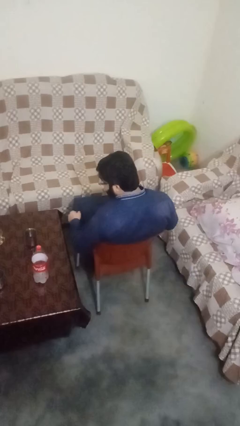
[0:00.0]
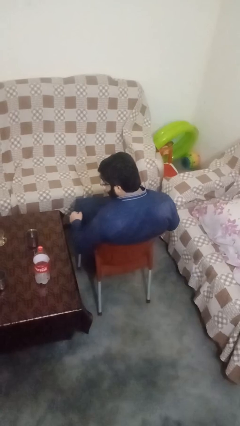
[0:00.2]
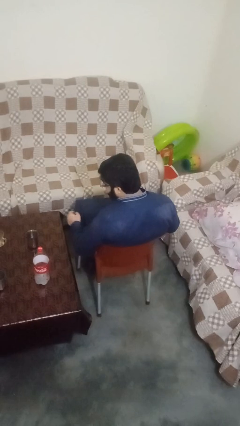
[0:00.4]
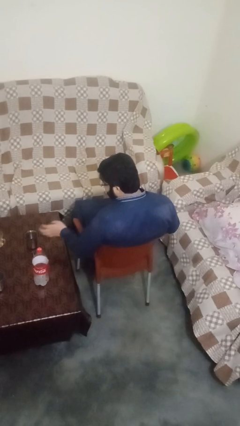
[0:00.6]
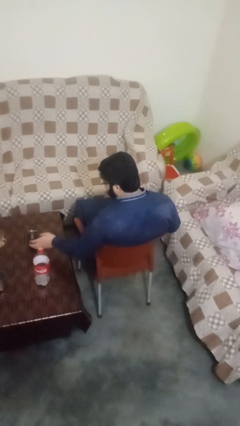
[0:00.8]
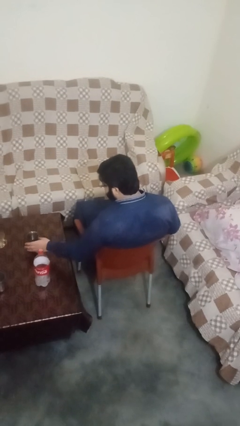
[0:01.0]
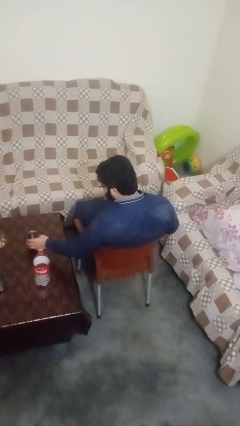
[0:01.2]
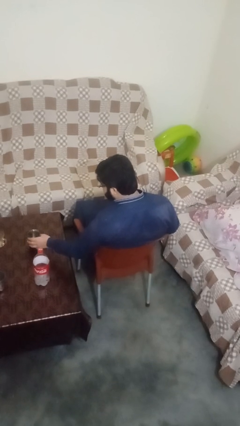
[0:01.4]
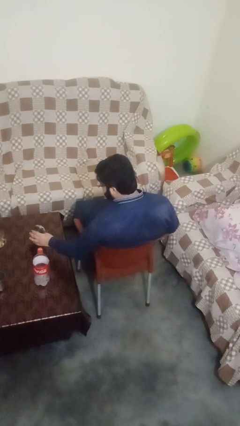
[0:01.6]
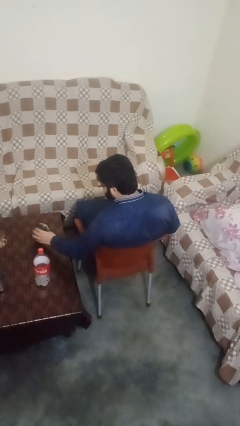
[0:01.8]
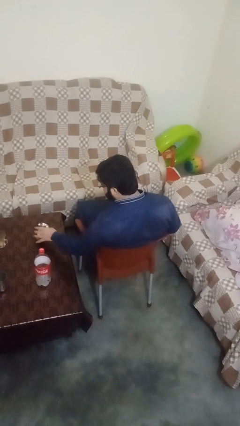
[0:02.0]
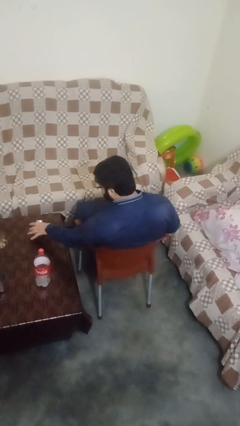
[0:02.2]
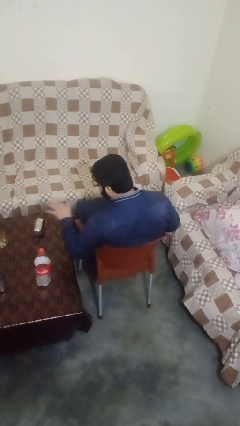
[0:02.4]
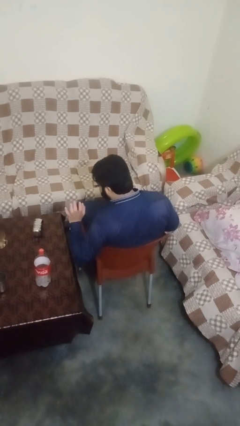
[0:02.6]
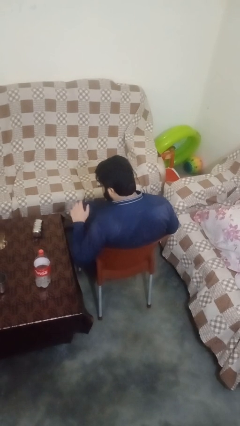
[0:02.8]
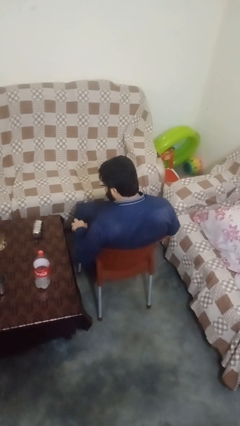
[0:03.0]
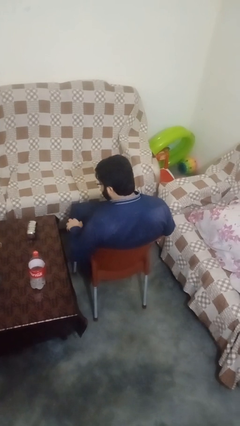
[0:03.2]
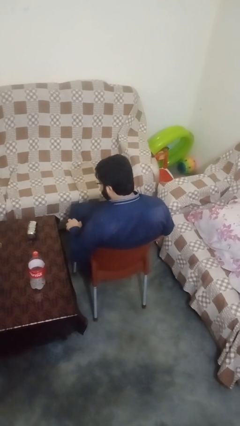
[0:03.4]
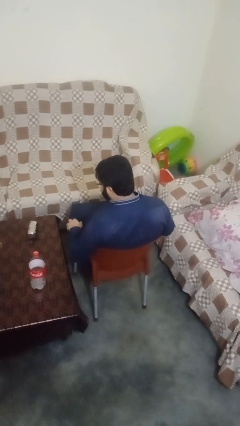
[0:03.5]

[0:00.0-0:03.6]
person knocks over glass

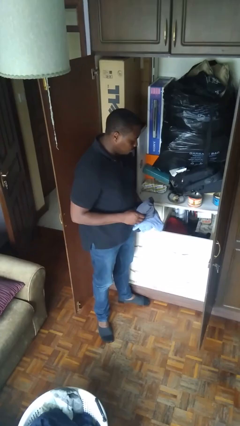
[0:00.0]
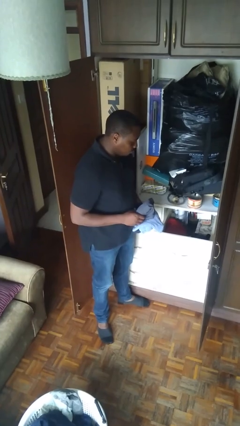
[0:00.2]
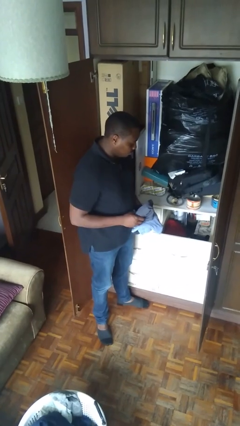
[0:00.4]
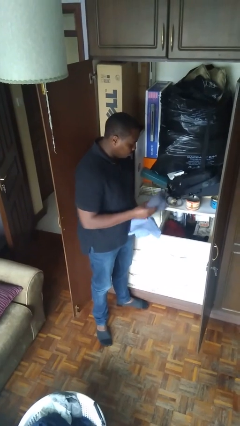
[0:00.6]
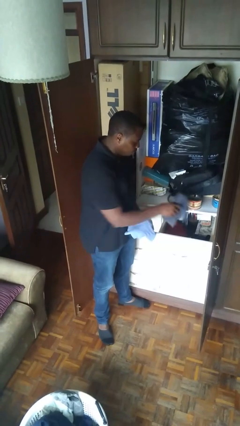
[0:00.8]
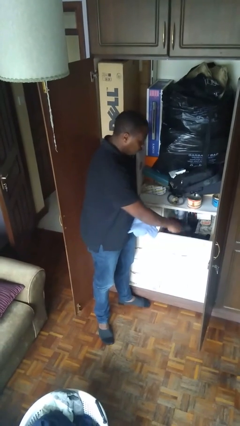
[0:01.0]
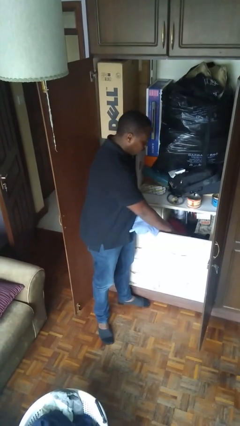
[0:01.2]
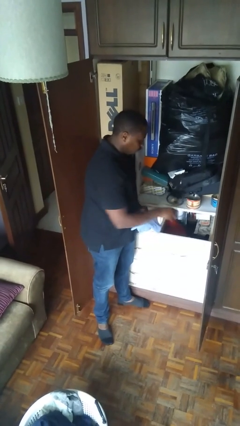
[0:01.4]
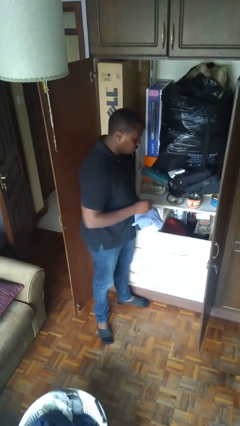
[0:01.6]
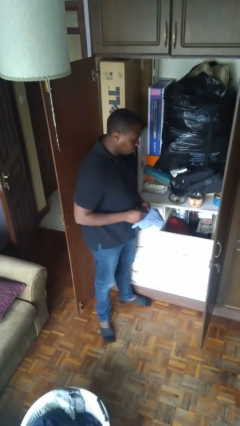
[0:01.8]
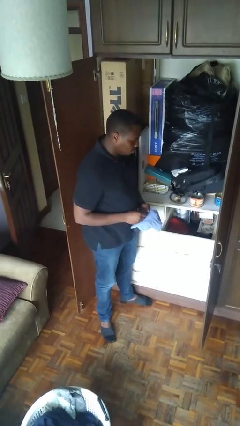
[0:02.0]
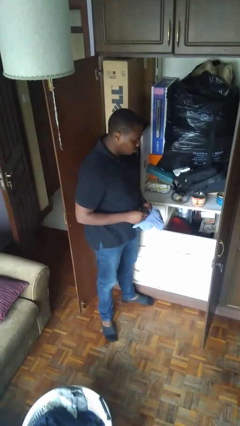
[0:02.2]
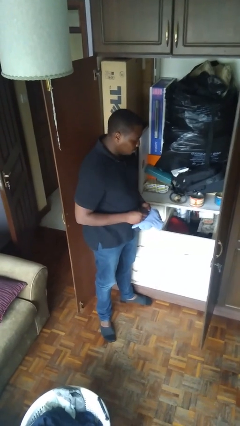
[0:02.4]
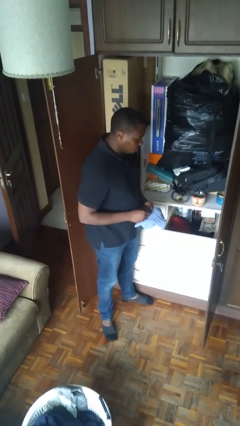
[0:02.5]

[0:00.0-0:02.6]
person puts clothes into dresser

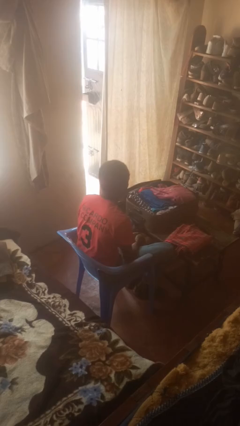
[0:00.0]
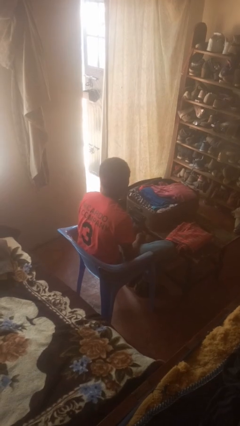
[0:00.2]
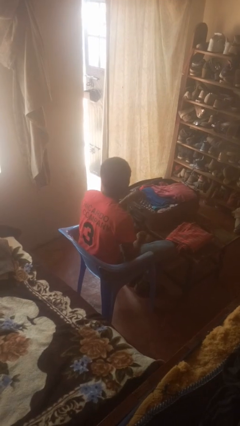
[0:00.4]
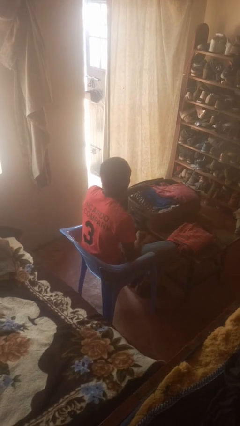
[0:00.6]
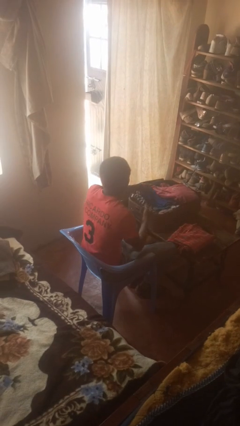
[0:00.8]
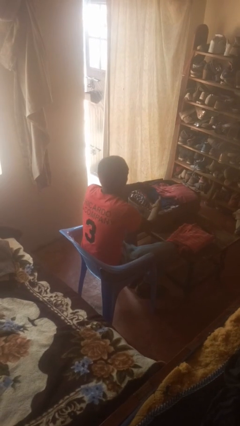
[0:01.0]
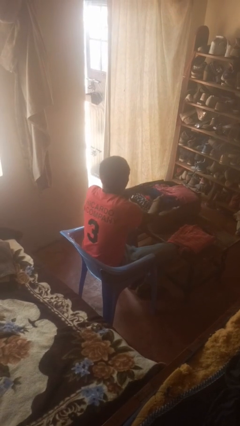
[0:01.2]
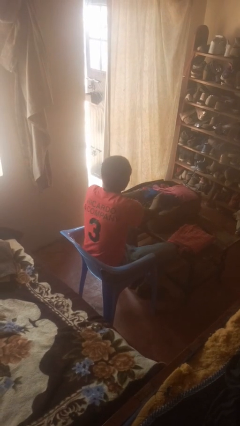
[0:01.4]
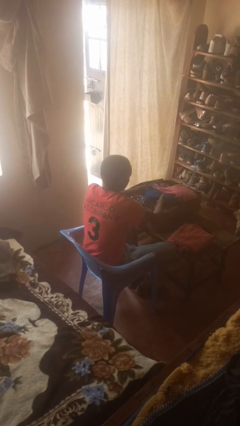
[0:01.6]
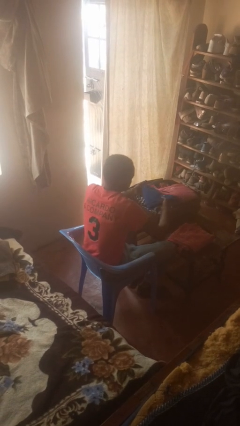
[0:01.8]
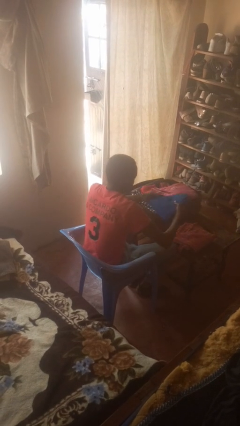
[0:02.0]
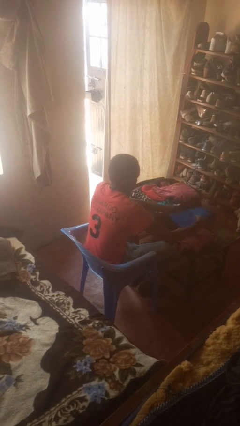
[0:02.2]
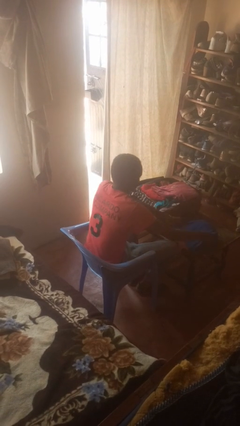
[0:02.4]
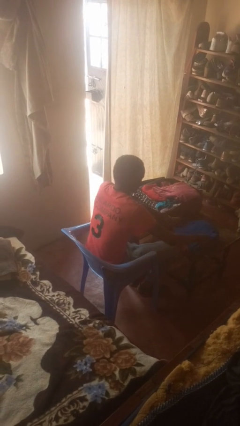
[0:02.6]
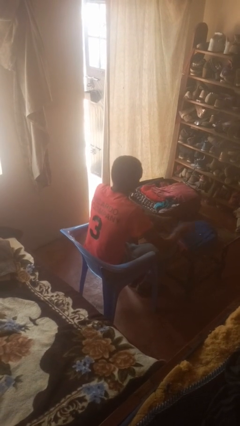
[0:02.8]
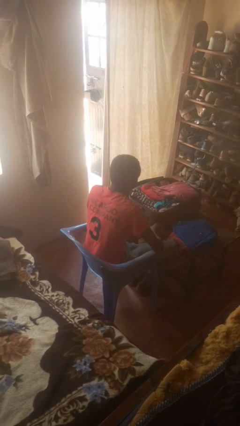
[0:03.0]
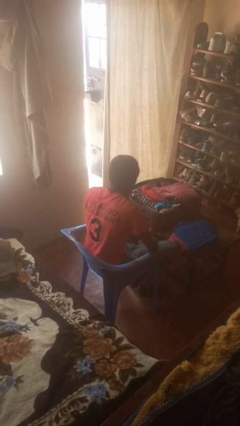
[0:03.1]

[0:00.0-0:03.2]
person unloads clothes from suitcase

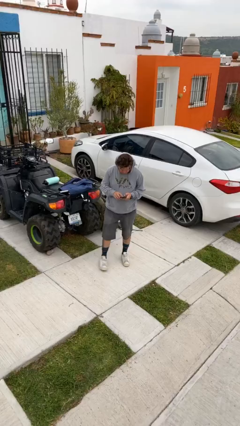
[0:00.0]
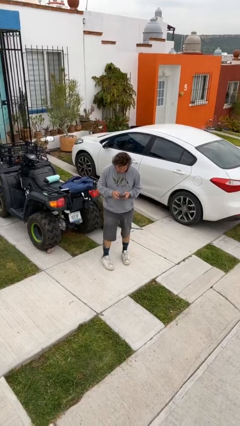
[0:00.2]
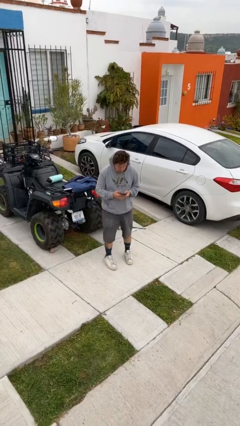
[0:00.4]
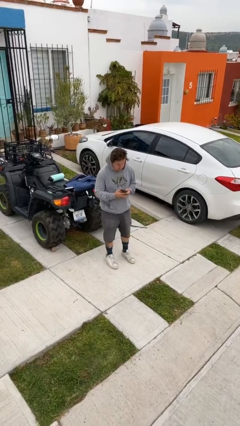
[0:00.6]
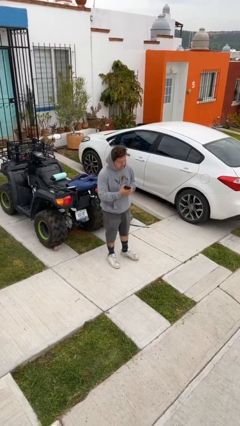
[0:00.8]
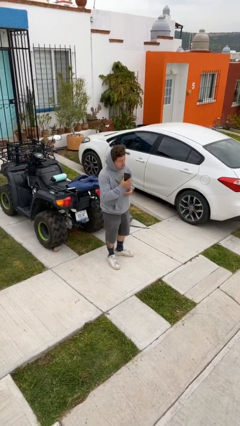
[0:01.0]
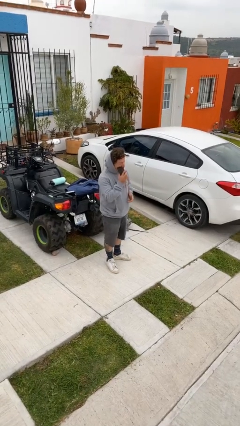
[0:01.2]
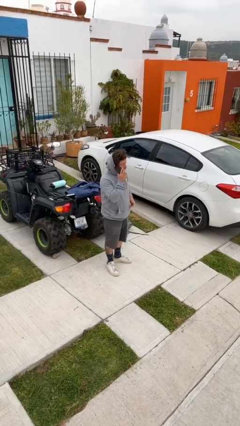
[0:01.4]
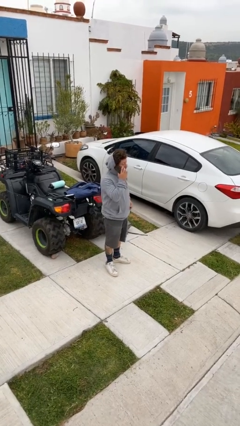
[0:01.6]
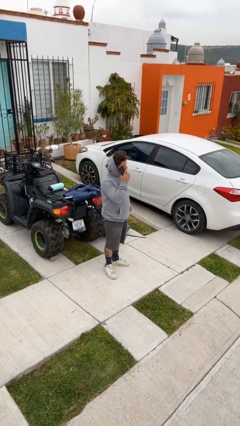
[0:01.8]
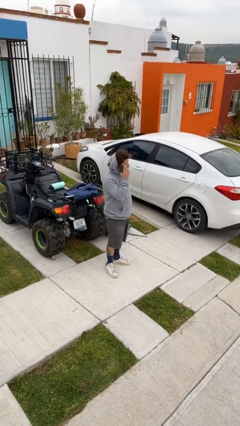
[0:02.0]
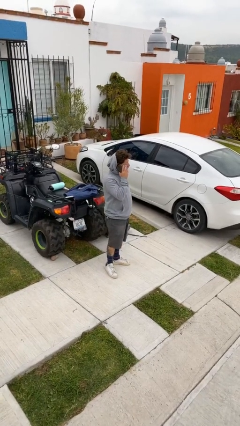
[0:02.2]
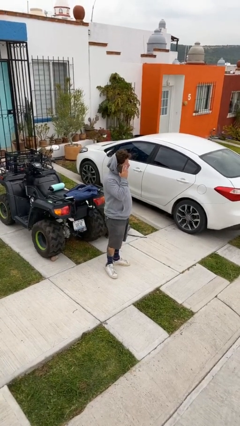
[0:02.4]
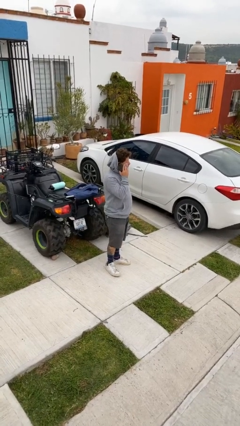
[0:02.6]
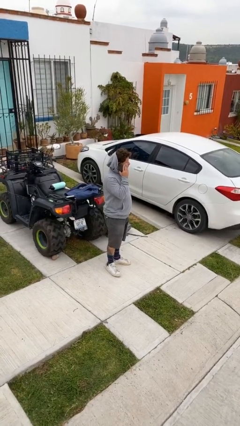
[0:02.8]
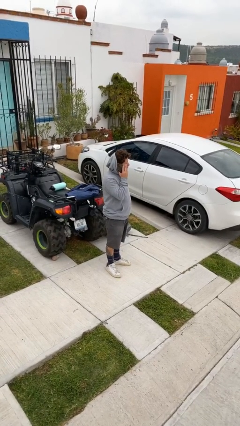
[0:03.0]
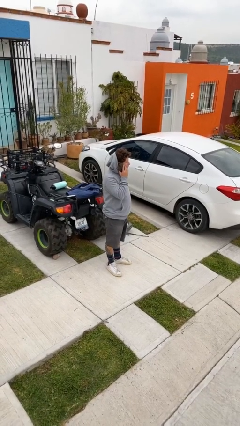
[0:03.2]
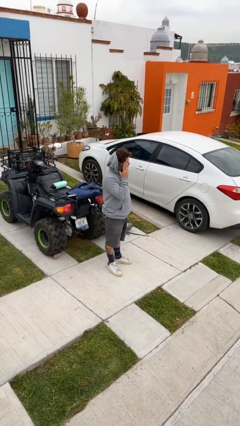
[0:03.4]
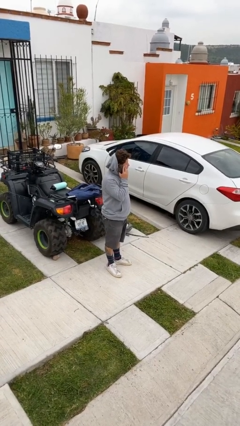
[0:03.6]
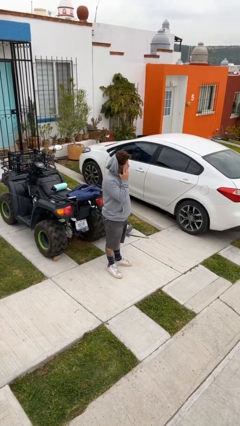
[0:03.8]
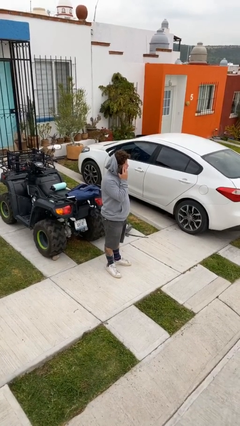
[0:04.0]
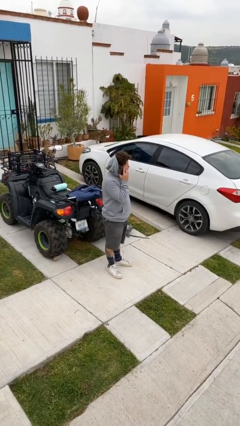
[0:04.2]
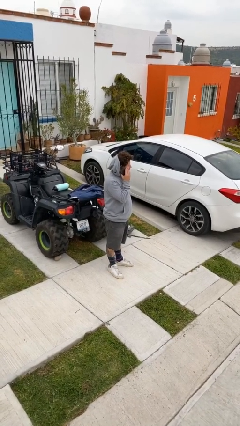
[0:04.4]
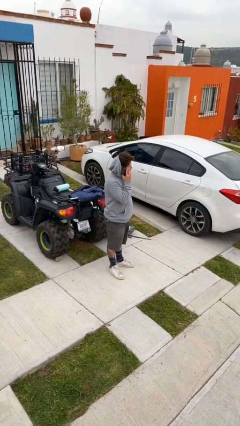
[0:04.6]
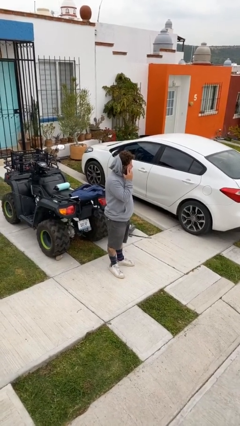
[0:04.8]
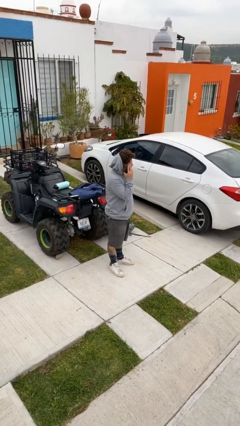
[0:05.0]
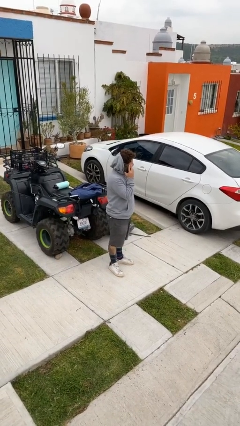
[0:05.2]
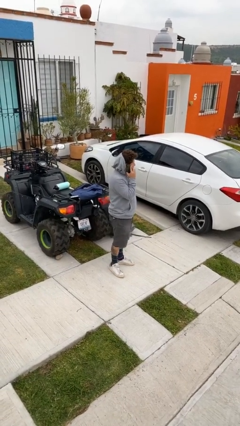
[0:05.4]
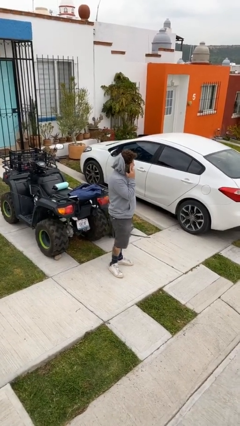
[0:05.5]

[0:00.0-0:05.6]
person talks on phone

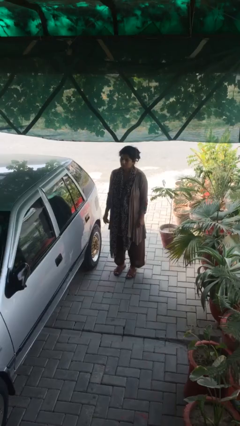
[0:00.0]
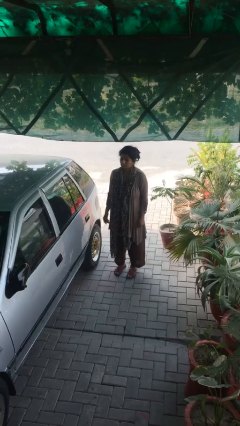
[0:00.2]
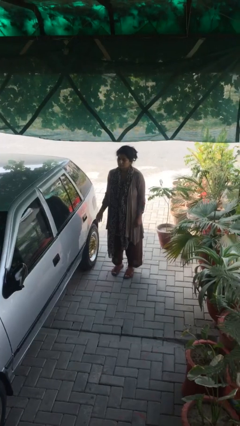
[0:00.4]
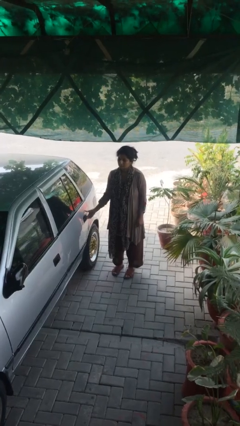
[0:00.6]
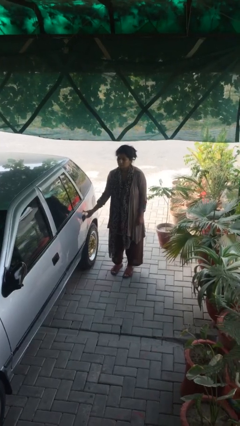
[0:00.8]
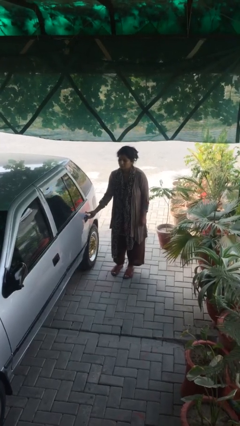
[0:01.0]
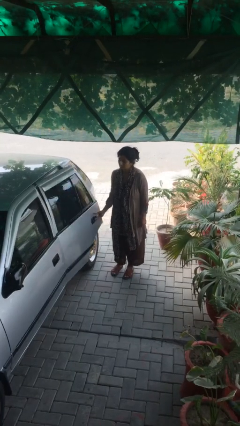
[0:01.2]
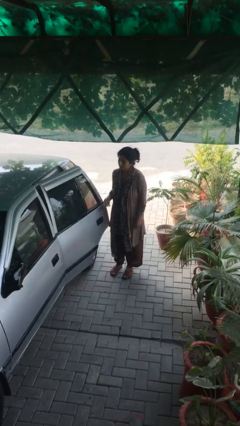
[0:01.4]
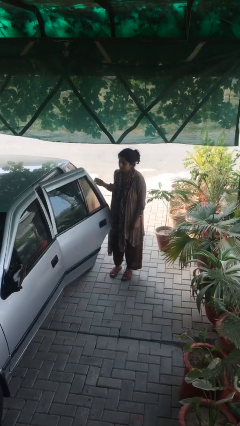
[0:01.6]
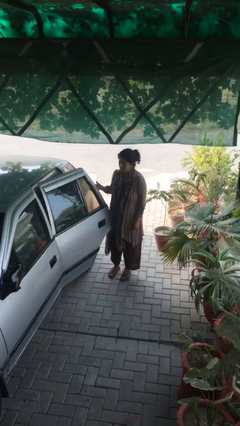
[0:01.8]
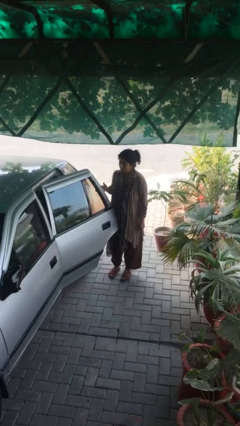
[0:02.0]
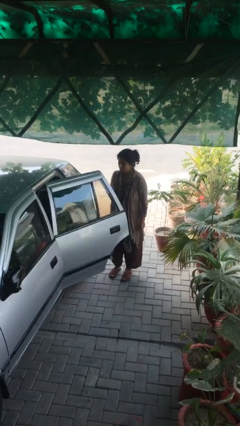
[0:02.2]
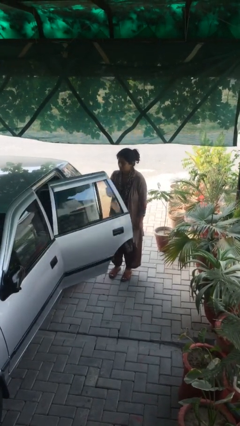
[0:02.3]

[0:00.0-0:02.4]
person opens car door
